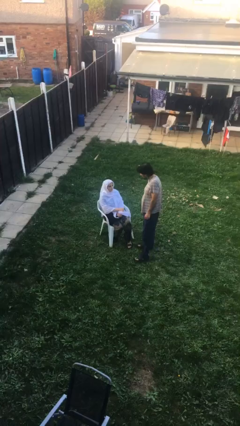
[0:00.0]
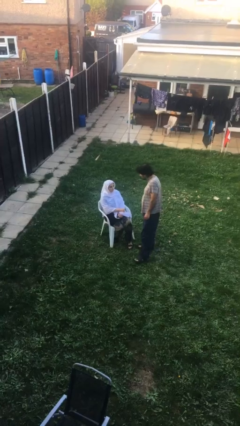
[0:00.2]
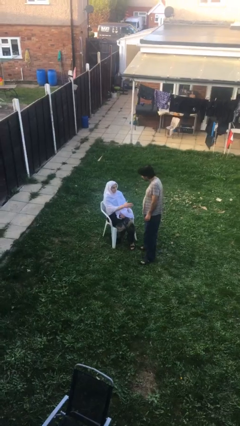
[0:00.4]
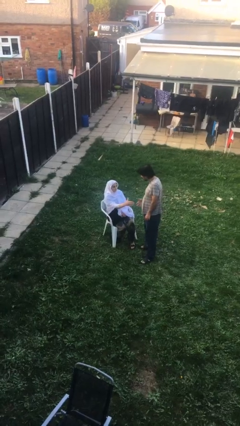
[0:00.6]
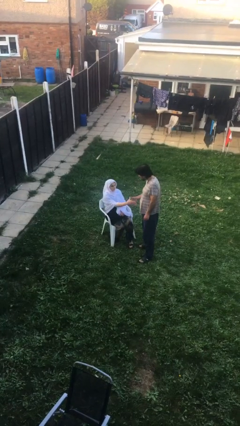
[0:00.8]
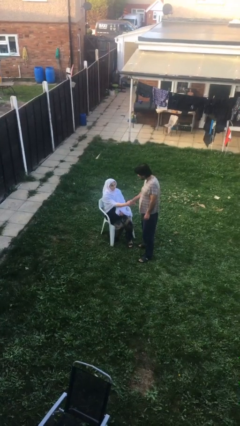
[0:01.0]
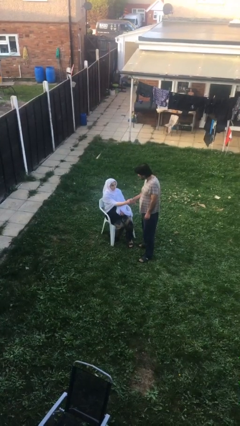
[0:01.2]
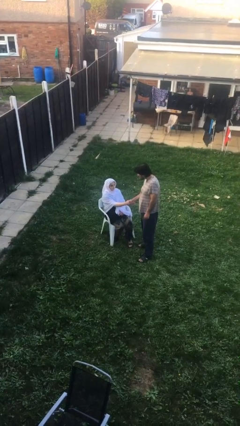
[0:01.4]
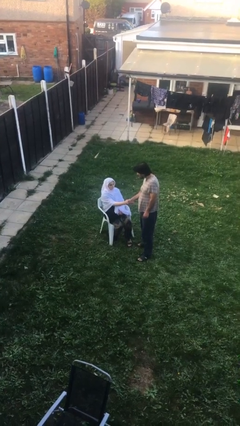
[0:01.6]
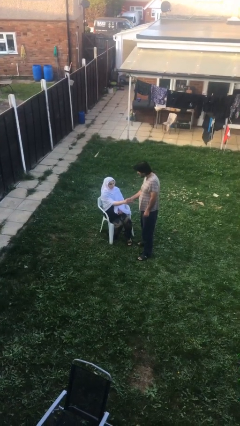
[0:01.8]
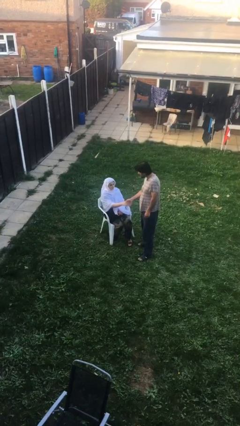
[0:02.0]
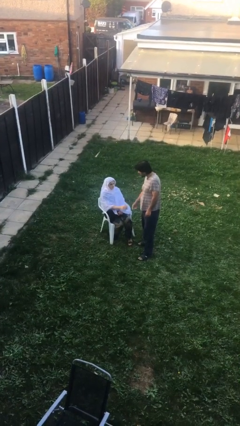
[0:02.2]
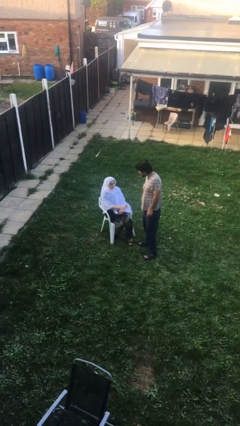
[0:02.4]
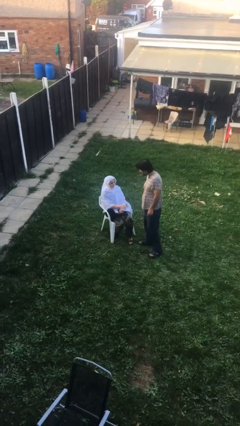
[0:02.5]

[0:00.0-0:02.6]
person shakes hand

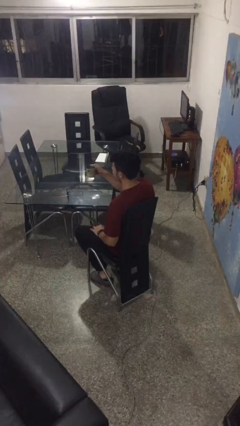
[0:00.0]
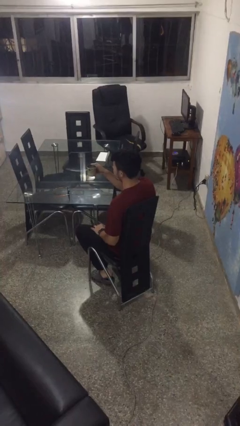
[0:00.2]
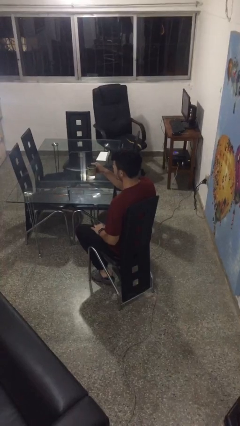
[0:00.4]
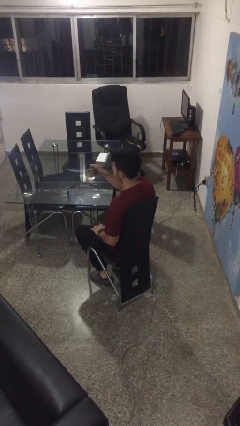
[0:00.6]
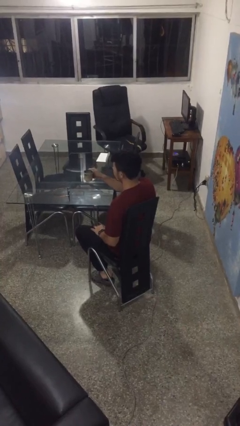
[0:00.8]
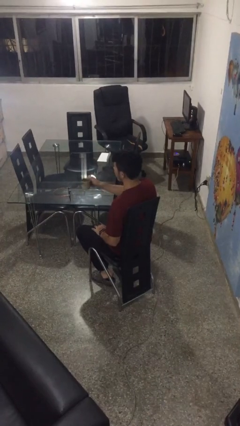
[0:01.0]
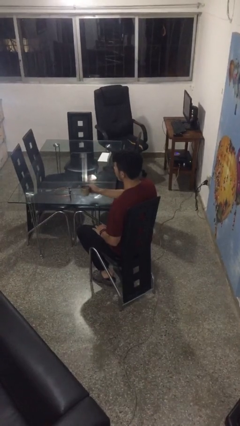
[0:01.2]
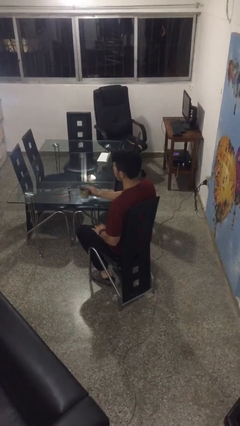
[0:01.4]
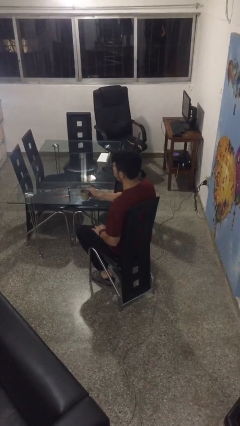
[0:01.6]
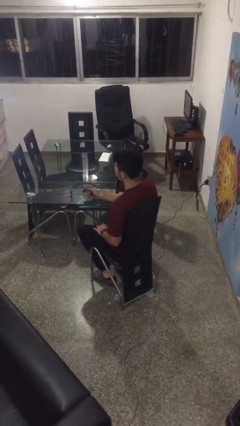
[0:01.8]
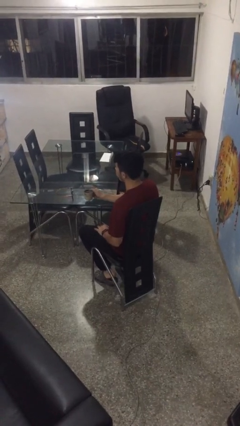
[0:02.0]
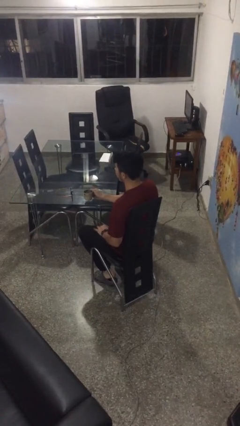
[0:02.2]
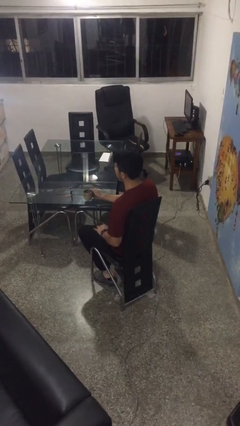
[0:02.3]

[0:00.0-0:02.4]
person puts down object on table

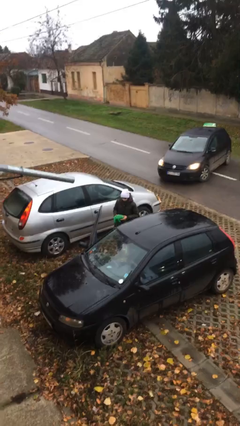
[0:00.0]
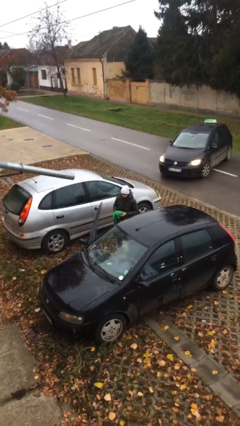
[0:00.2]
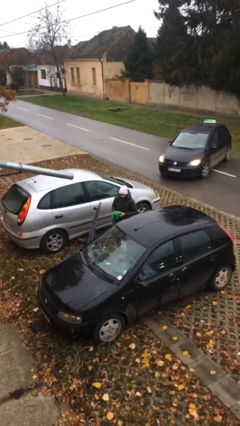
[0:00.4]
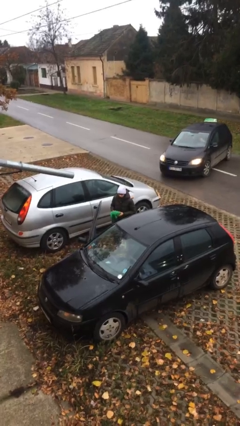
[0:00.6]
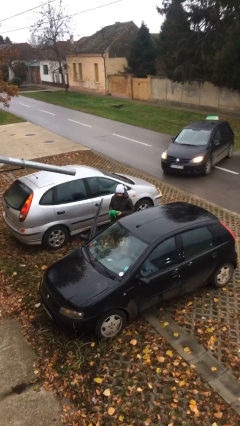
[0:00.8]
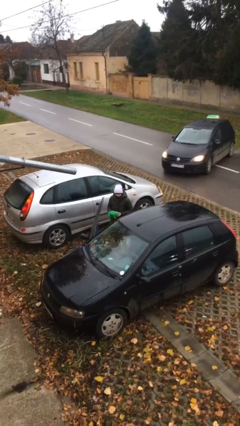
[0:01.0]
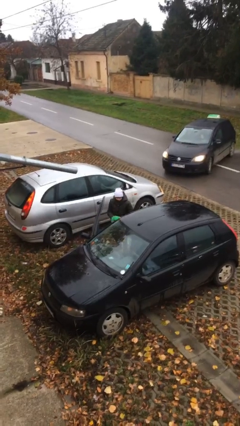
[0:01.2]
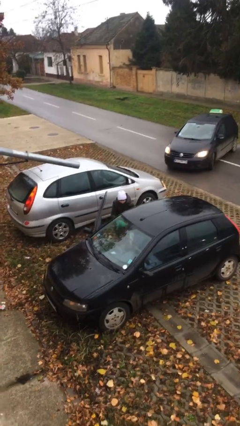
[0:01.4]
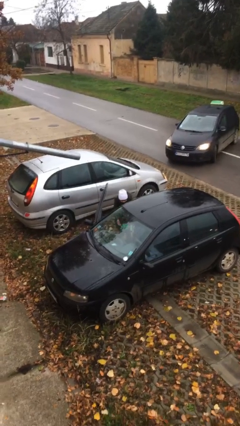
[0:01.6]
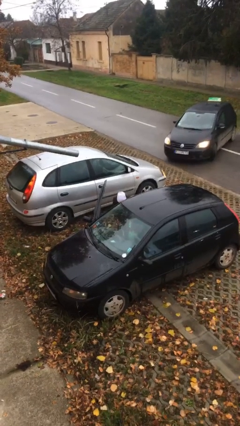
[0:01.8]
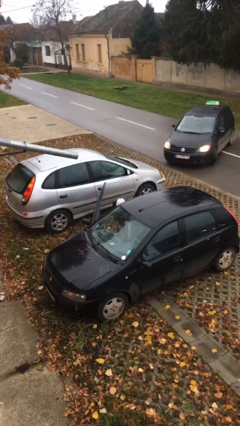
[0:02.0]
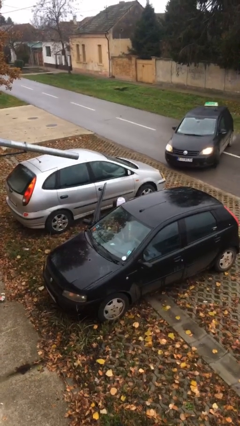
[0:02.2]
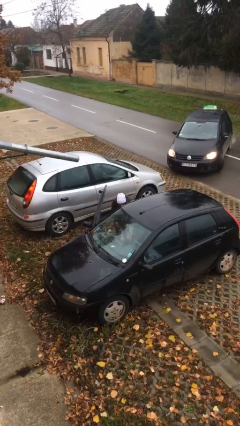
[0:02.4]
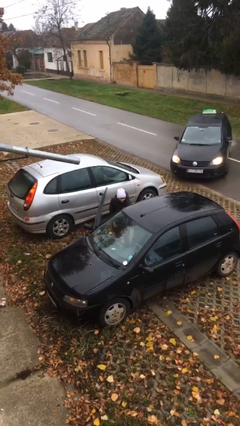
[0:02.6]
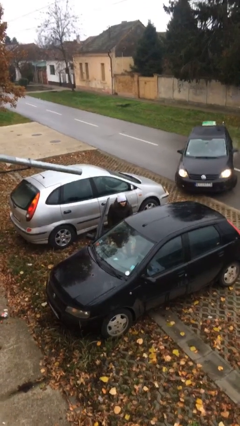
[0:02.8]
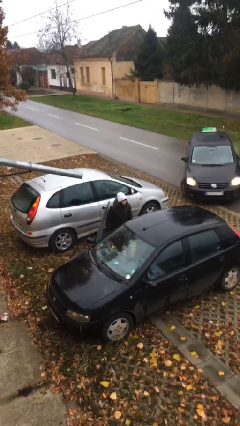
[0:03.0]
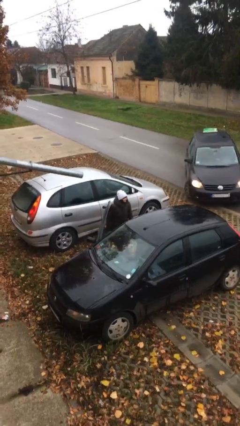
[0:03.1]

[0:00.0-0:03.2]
person loads car

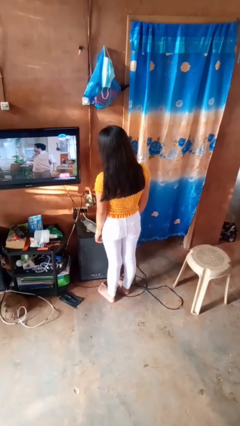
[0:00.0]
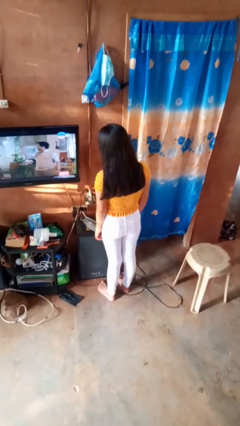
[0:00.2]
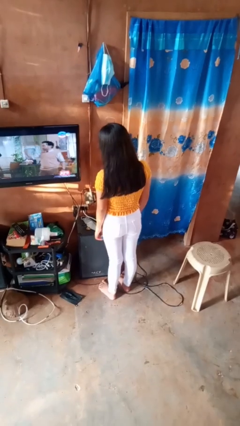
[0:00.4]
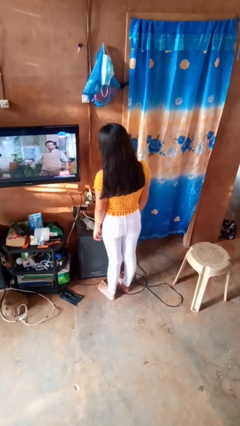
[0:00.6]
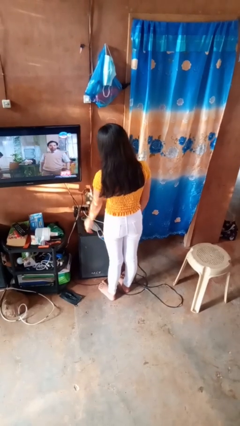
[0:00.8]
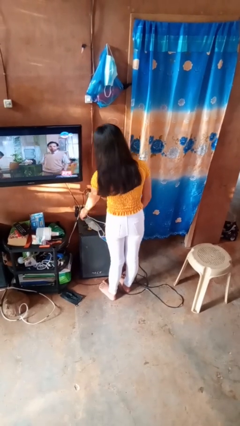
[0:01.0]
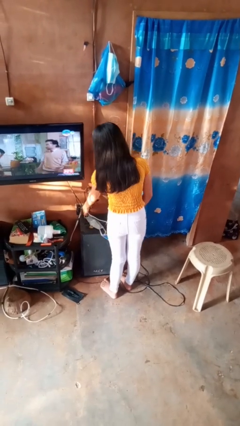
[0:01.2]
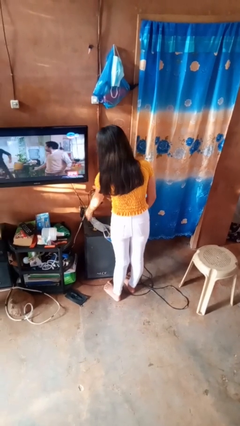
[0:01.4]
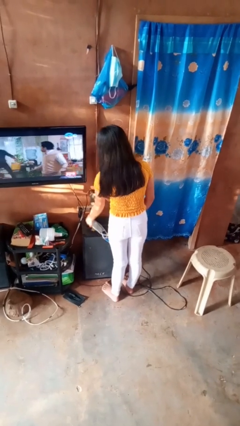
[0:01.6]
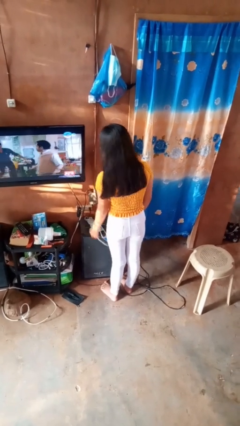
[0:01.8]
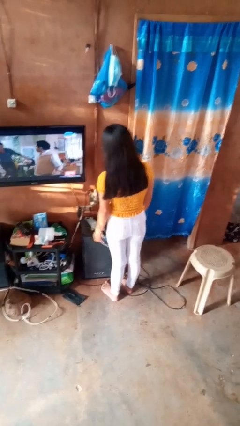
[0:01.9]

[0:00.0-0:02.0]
person unplugs from electrical socket

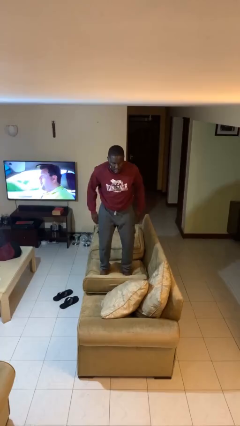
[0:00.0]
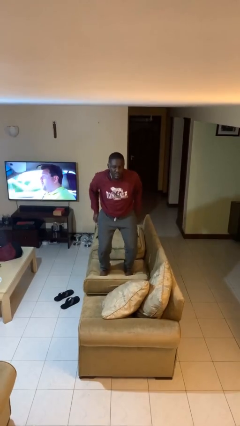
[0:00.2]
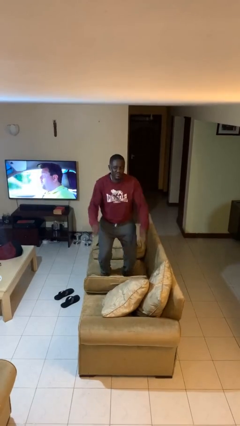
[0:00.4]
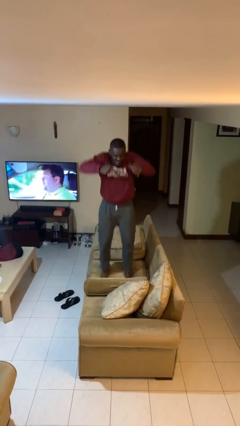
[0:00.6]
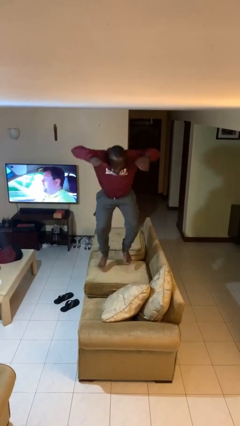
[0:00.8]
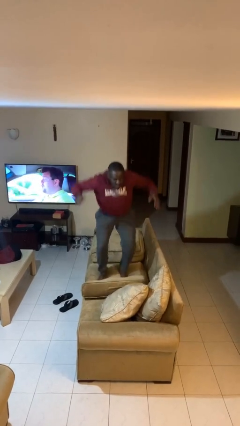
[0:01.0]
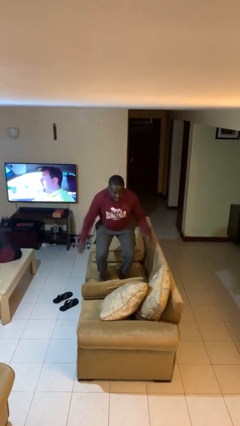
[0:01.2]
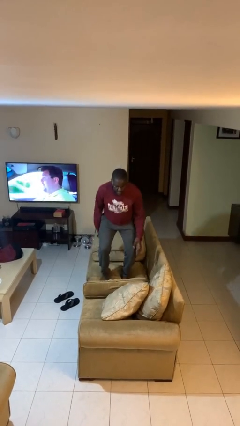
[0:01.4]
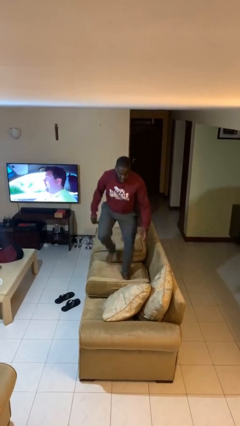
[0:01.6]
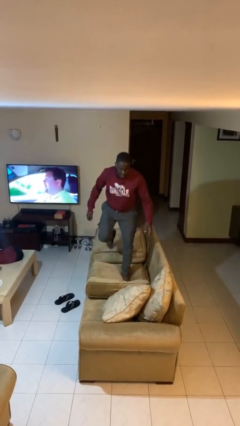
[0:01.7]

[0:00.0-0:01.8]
person jumps on couch

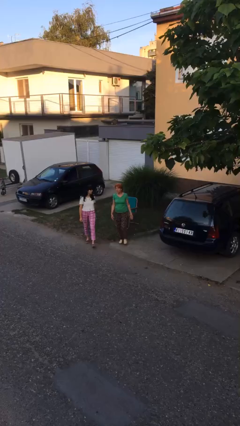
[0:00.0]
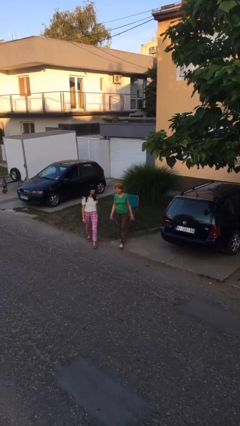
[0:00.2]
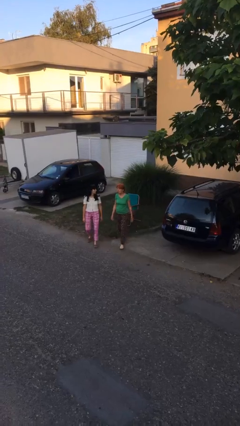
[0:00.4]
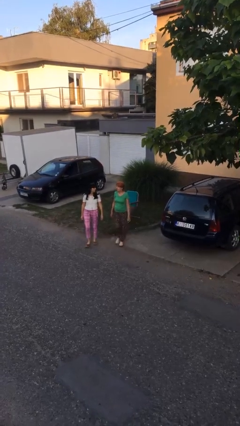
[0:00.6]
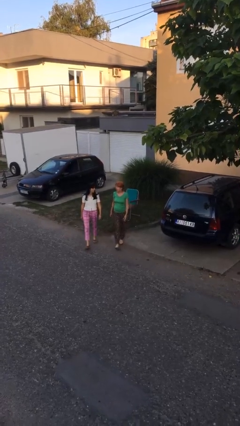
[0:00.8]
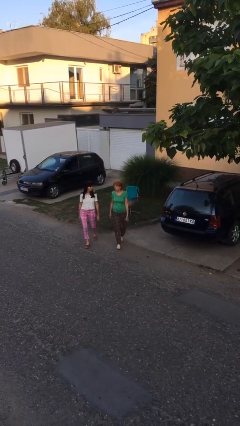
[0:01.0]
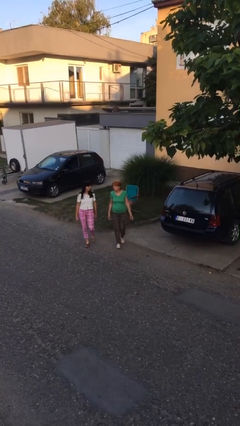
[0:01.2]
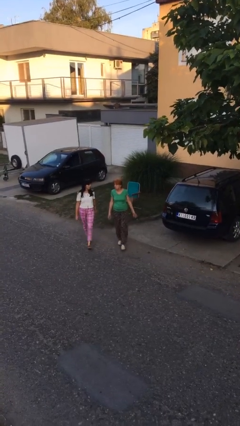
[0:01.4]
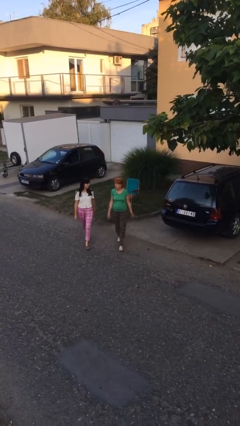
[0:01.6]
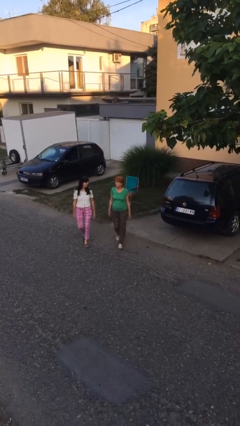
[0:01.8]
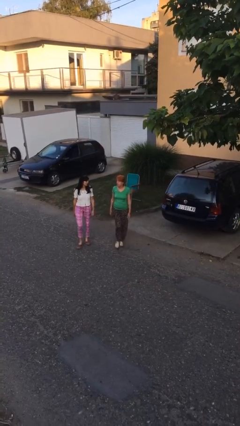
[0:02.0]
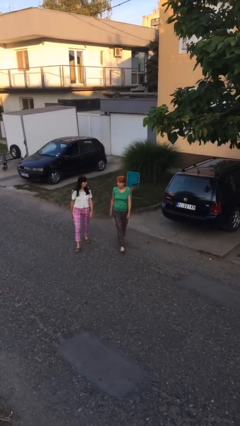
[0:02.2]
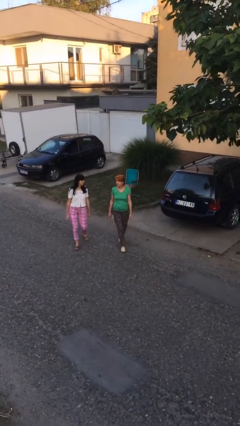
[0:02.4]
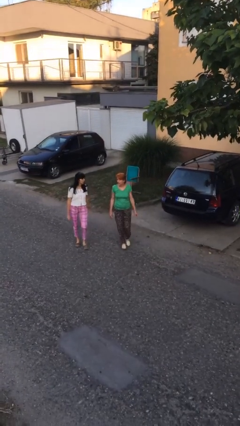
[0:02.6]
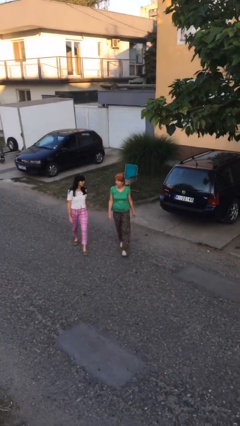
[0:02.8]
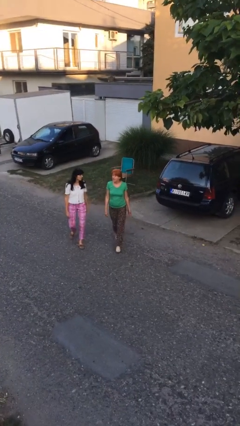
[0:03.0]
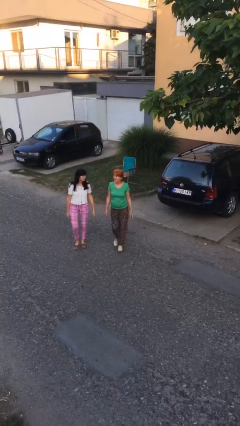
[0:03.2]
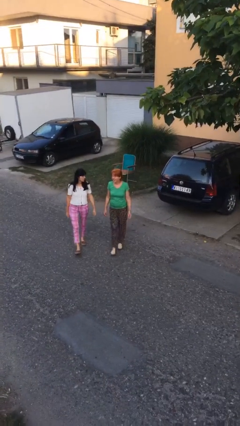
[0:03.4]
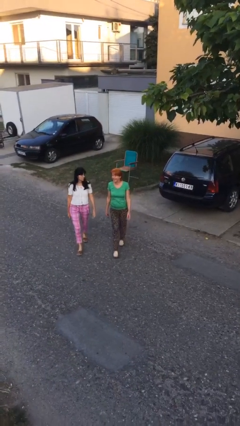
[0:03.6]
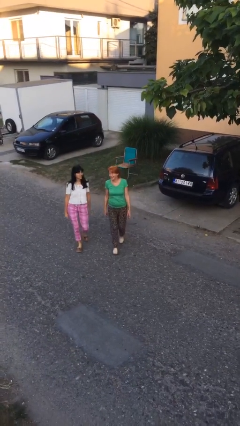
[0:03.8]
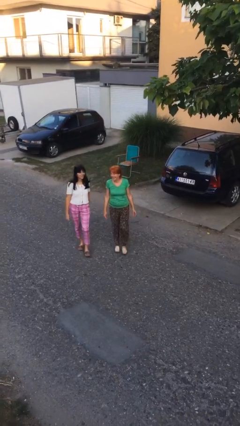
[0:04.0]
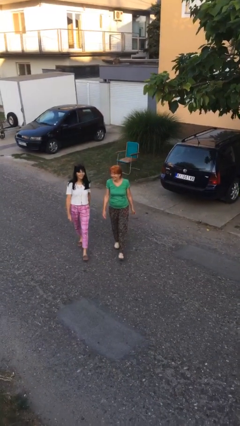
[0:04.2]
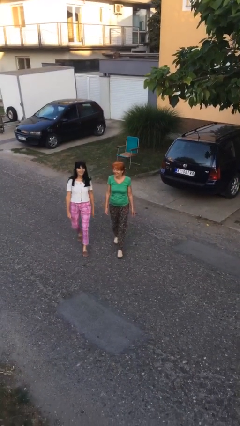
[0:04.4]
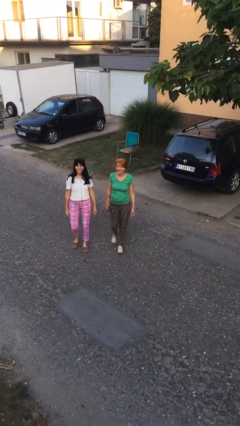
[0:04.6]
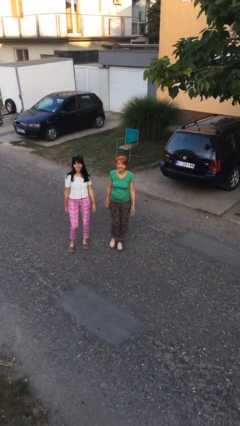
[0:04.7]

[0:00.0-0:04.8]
person talks to person

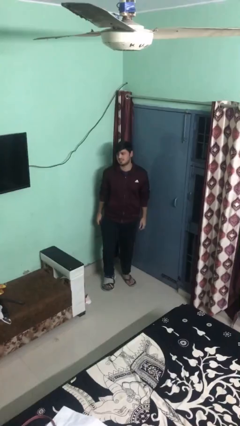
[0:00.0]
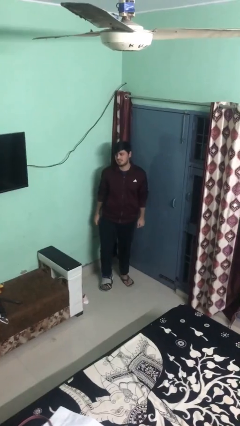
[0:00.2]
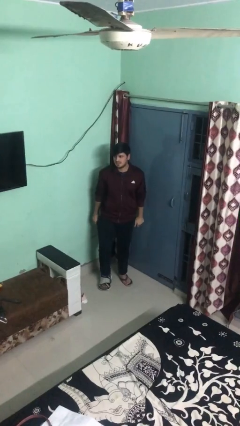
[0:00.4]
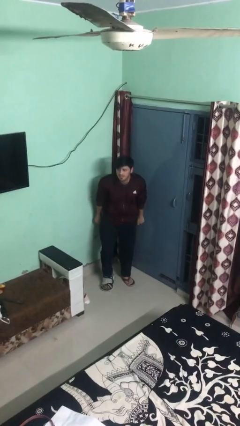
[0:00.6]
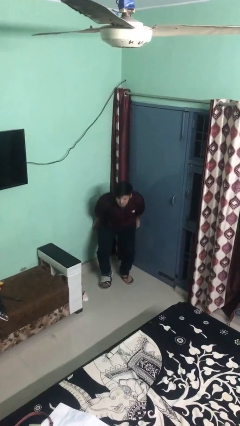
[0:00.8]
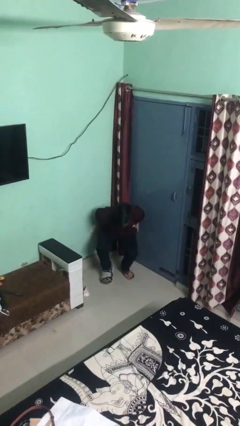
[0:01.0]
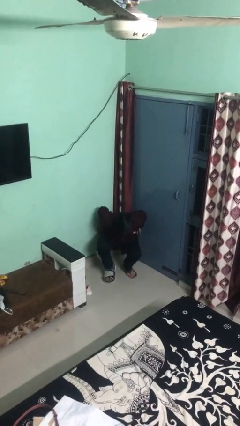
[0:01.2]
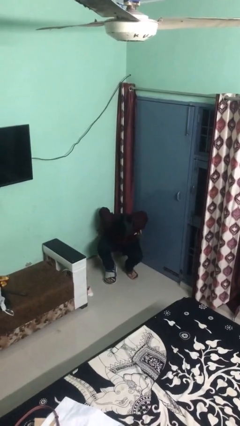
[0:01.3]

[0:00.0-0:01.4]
person sits down
